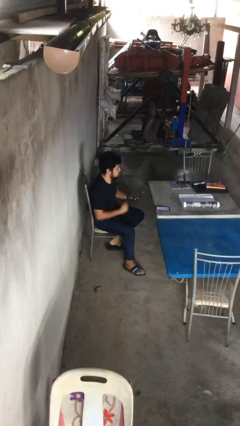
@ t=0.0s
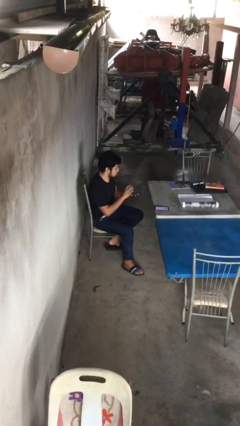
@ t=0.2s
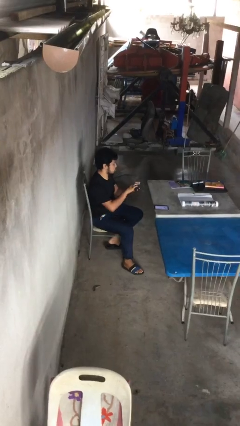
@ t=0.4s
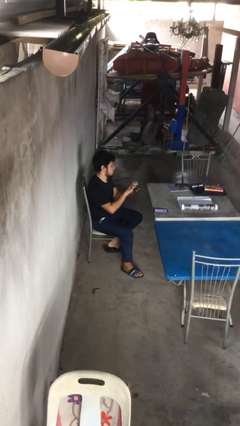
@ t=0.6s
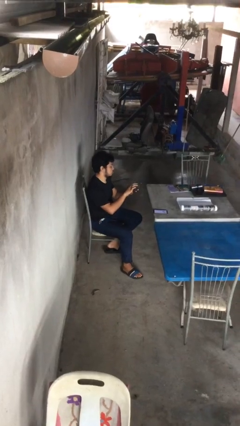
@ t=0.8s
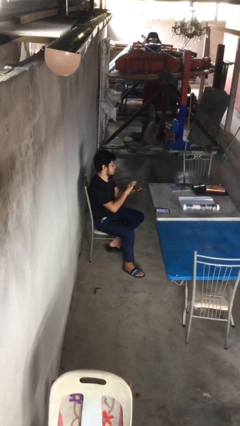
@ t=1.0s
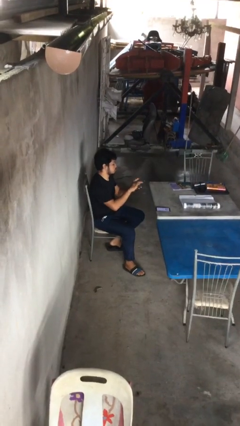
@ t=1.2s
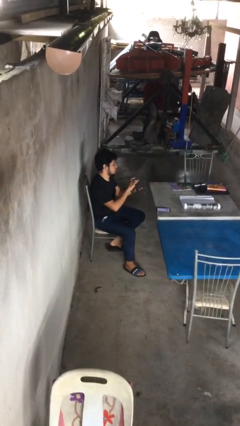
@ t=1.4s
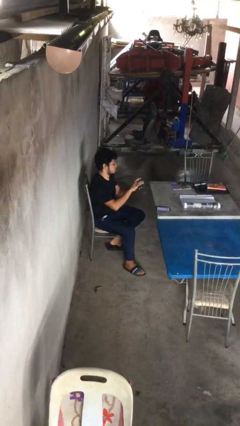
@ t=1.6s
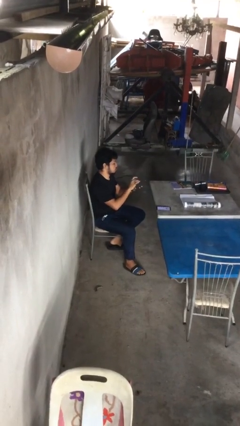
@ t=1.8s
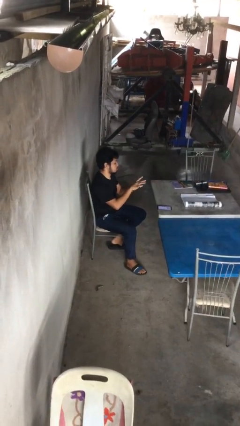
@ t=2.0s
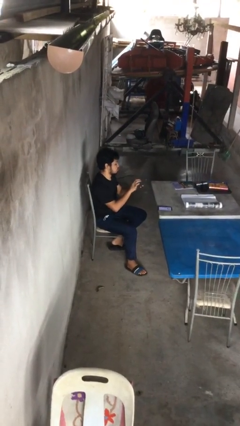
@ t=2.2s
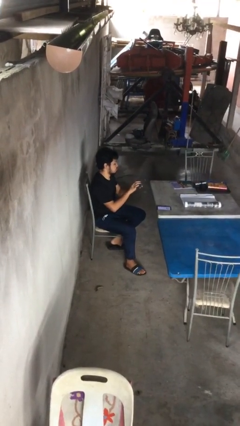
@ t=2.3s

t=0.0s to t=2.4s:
person interacts with tablet

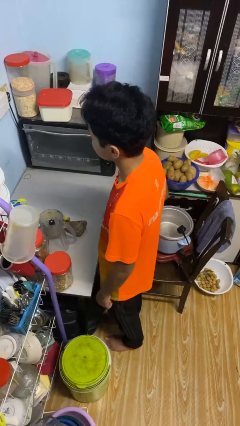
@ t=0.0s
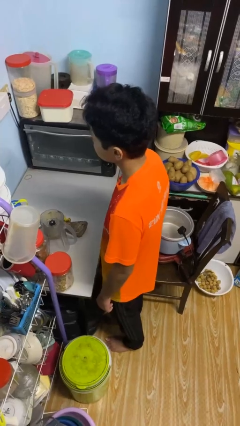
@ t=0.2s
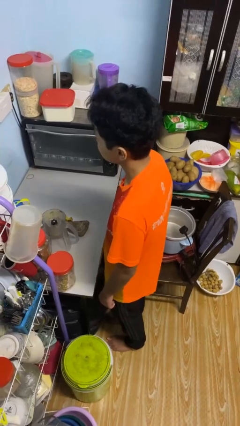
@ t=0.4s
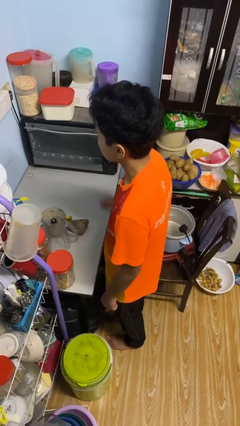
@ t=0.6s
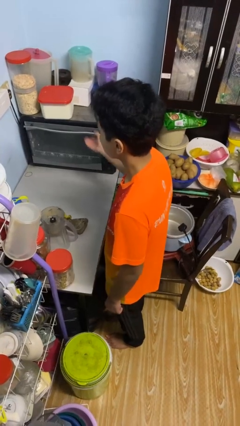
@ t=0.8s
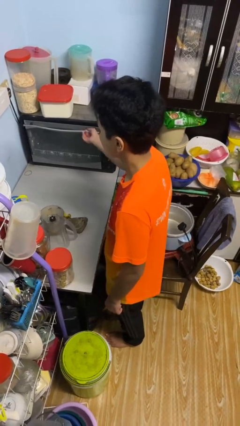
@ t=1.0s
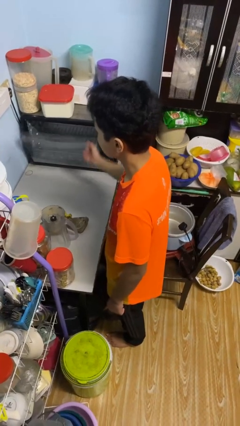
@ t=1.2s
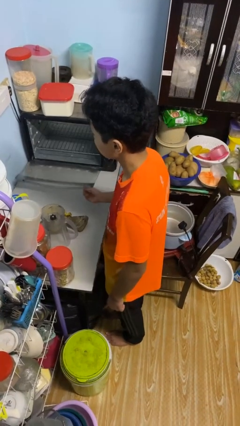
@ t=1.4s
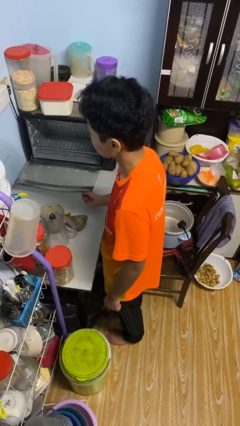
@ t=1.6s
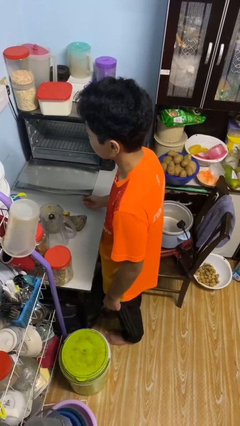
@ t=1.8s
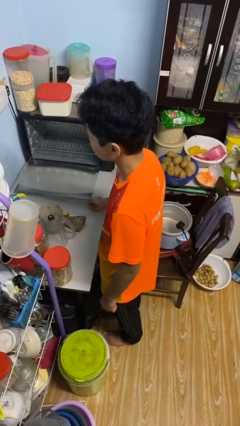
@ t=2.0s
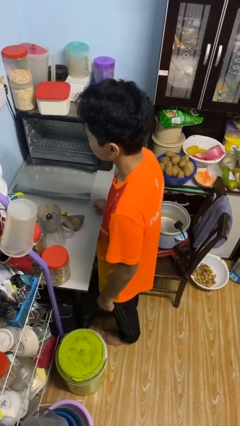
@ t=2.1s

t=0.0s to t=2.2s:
person opens oven door

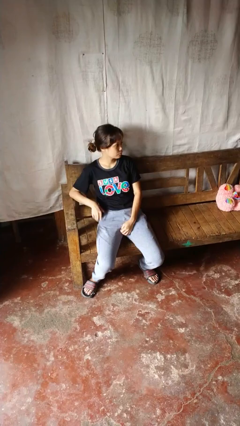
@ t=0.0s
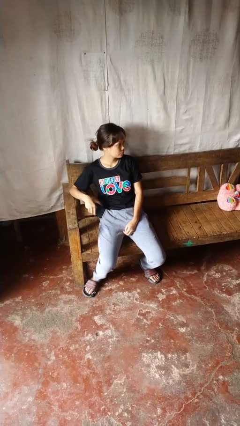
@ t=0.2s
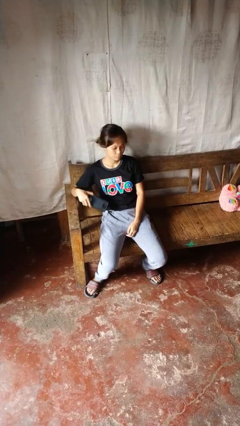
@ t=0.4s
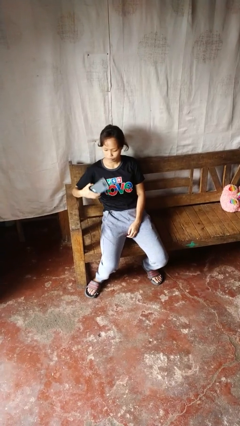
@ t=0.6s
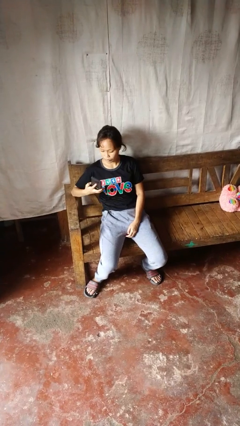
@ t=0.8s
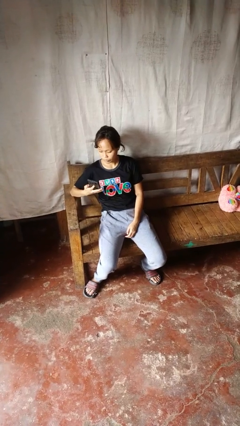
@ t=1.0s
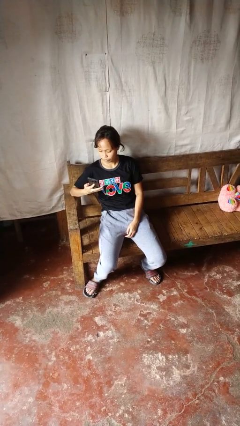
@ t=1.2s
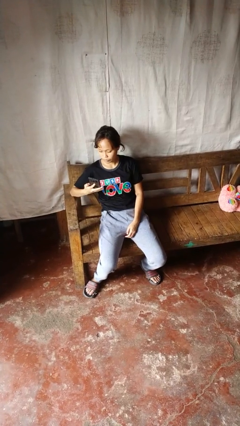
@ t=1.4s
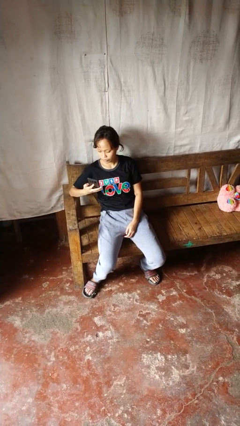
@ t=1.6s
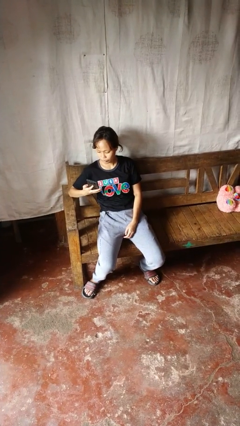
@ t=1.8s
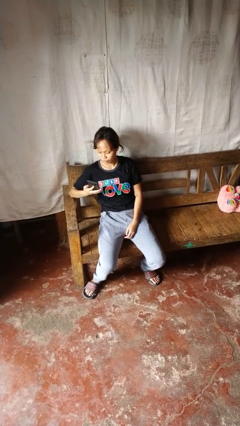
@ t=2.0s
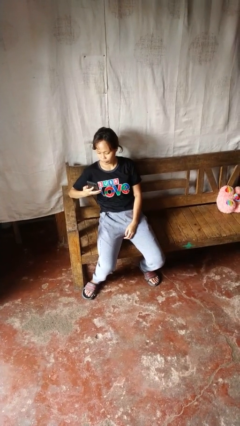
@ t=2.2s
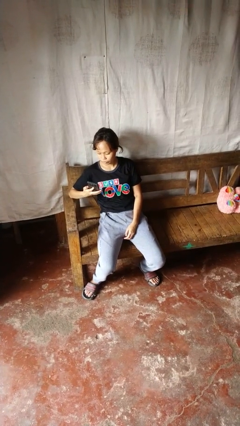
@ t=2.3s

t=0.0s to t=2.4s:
person takes phone from pocket

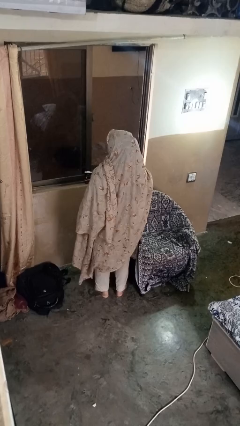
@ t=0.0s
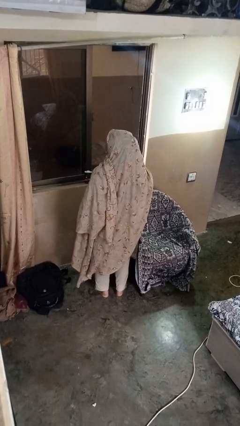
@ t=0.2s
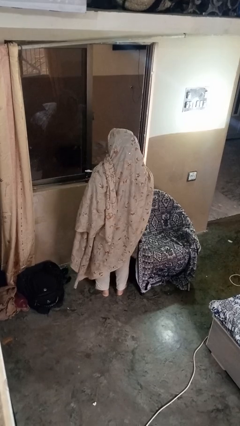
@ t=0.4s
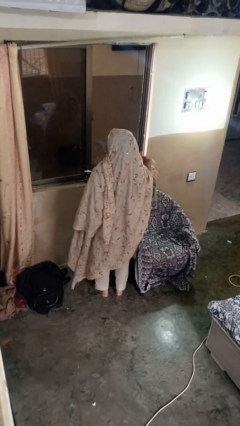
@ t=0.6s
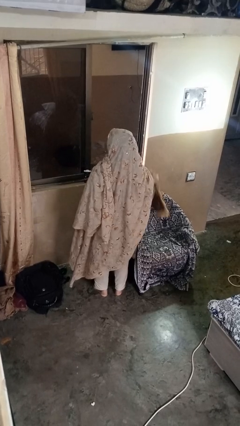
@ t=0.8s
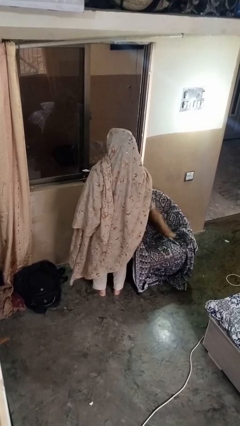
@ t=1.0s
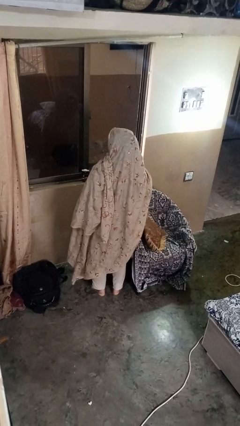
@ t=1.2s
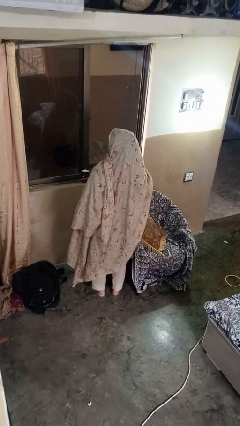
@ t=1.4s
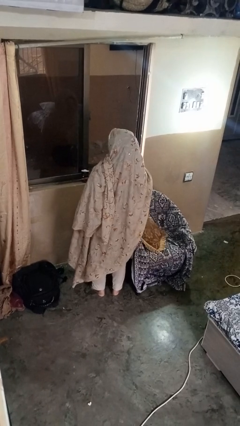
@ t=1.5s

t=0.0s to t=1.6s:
person puts down object on couch

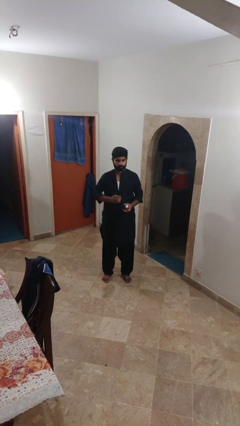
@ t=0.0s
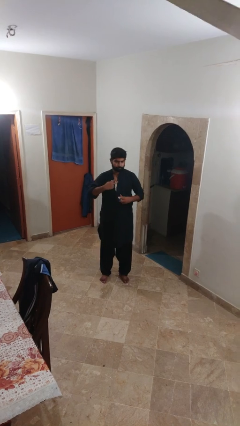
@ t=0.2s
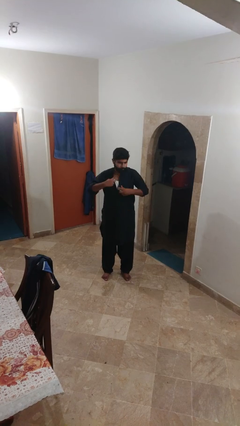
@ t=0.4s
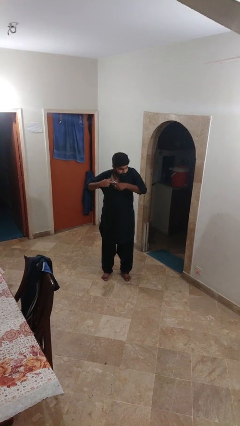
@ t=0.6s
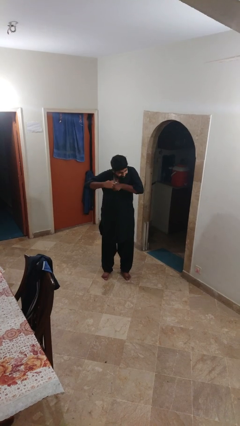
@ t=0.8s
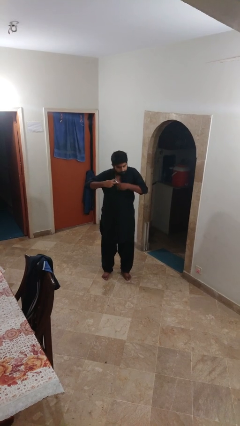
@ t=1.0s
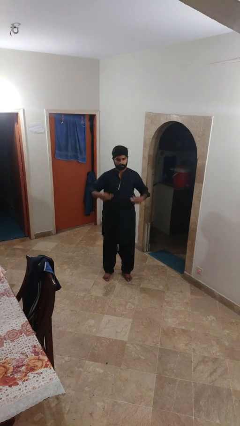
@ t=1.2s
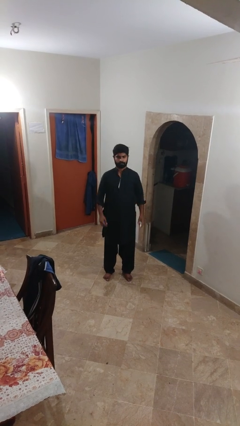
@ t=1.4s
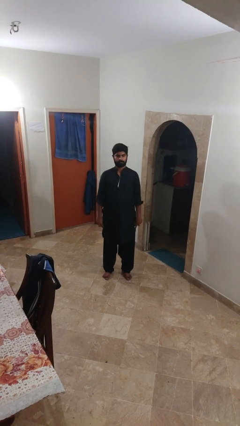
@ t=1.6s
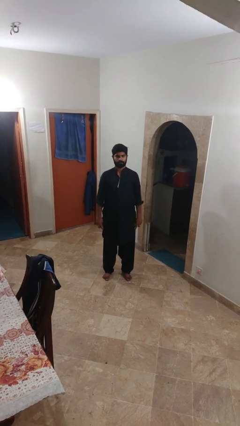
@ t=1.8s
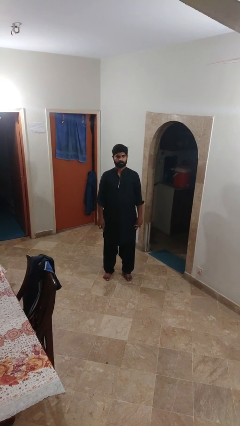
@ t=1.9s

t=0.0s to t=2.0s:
person applies deodorant

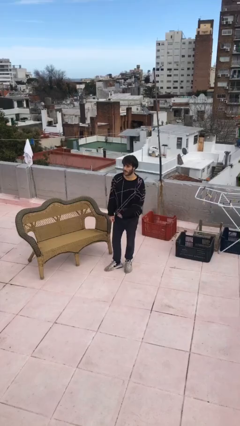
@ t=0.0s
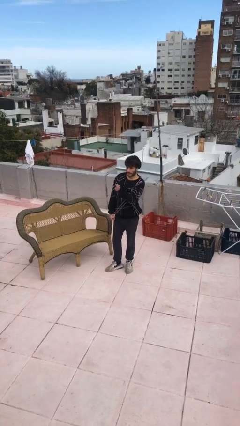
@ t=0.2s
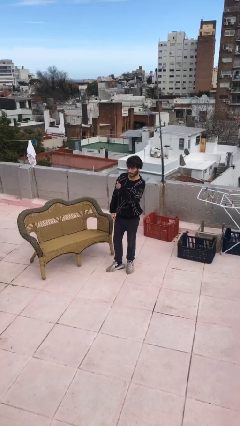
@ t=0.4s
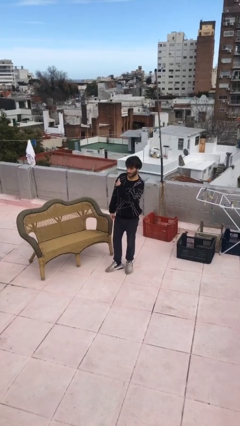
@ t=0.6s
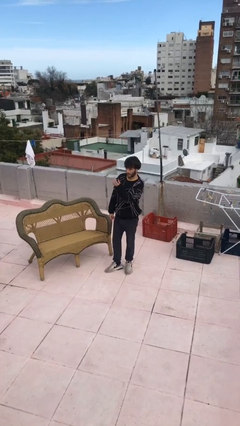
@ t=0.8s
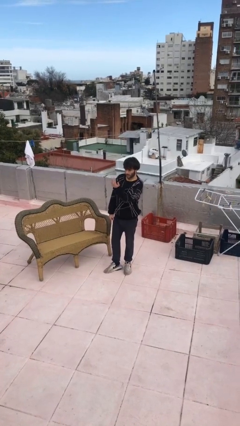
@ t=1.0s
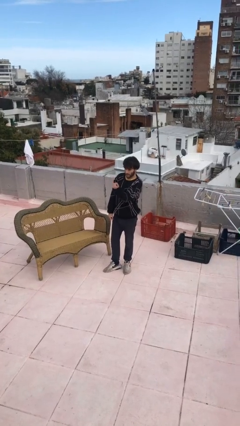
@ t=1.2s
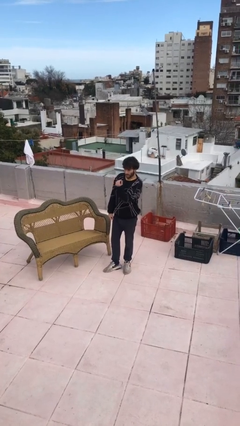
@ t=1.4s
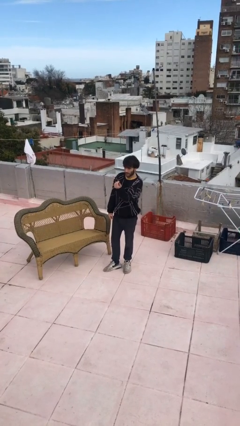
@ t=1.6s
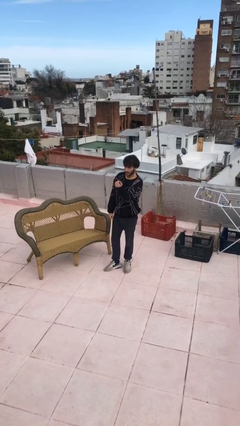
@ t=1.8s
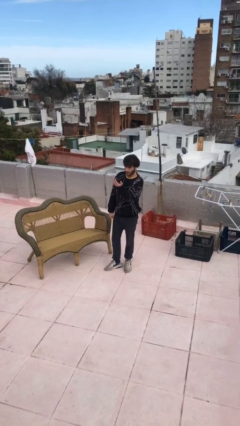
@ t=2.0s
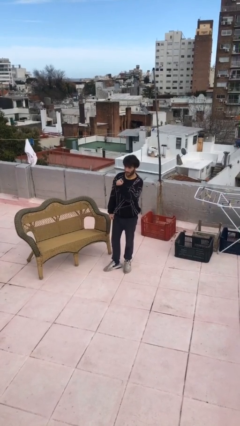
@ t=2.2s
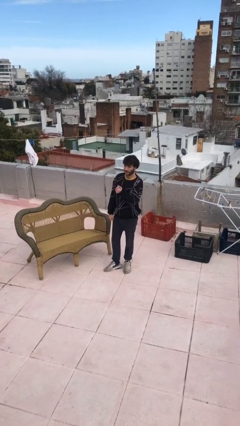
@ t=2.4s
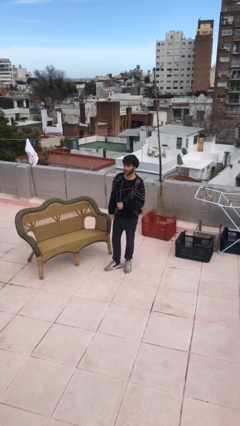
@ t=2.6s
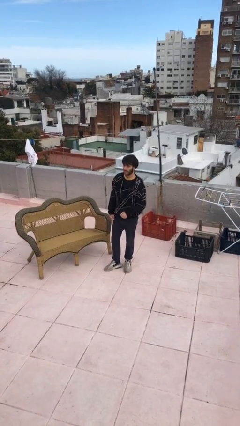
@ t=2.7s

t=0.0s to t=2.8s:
person gestures come here

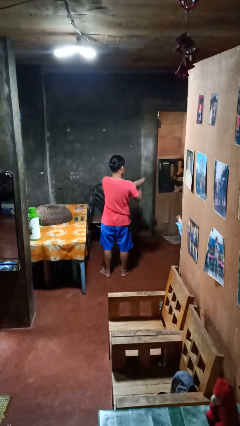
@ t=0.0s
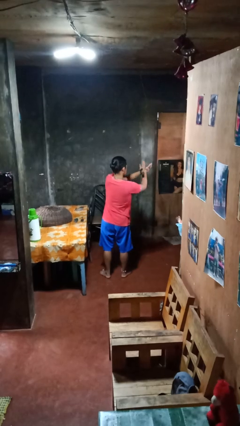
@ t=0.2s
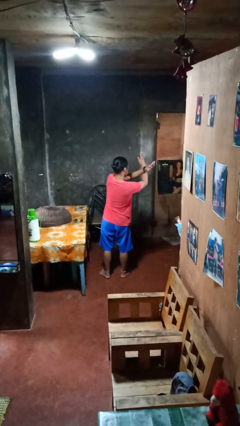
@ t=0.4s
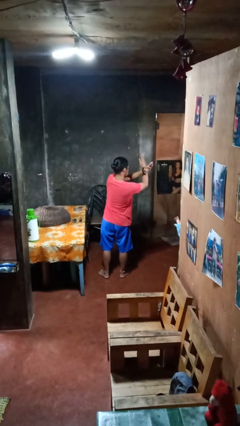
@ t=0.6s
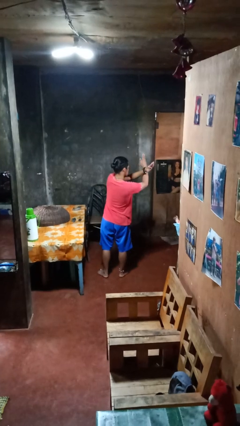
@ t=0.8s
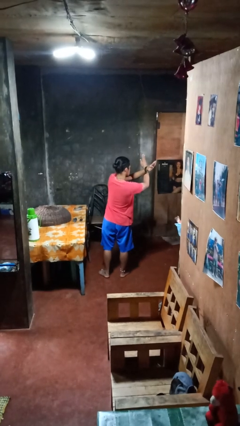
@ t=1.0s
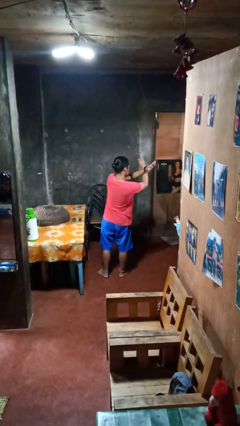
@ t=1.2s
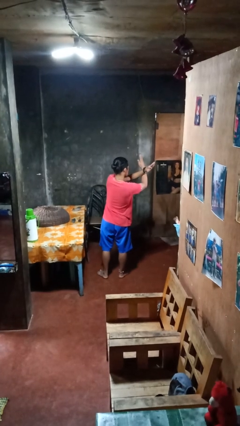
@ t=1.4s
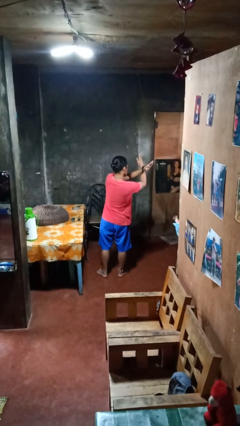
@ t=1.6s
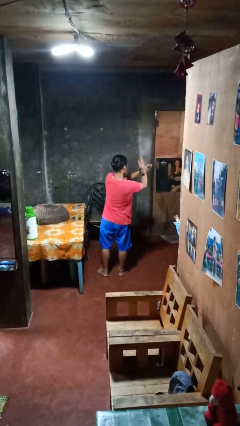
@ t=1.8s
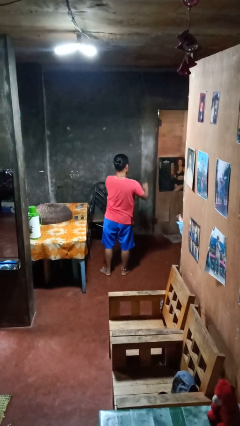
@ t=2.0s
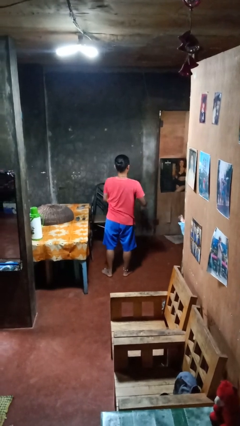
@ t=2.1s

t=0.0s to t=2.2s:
person gestures arms x

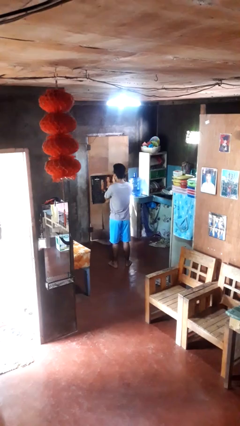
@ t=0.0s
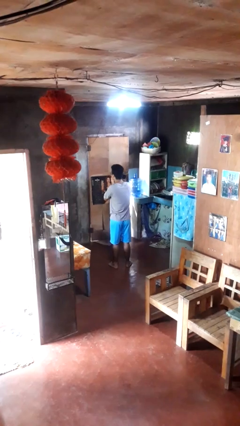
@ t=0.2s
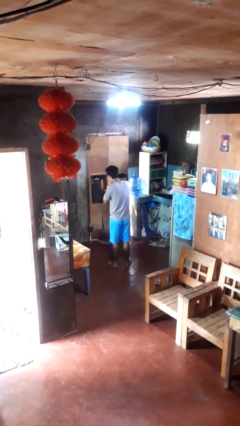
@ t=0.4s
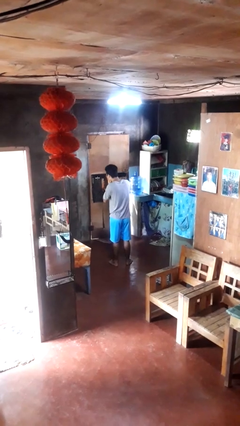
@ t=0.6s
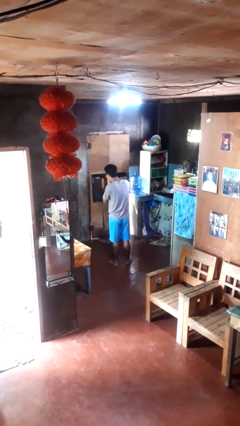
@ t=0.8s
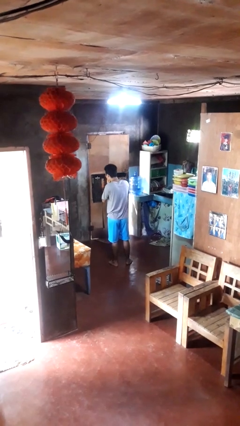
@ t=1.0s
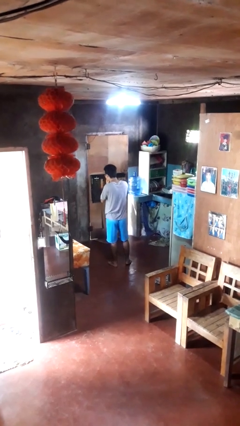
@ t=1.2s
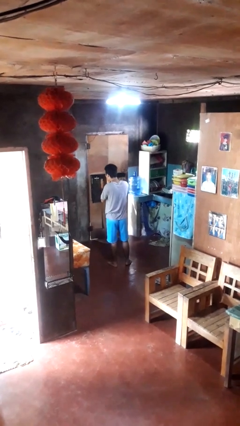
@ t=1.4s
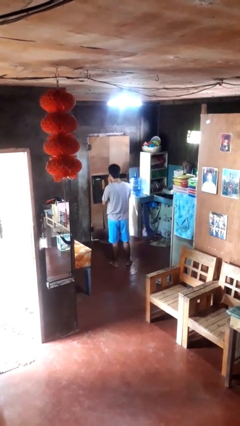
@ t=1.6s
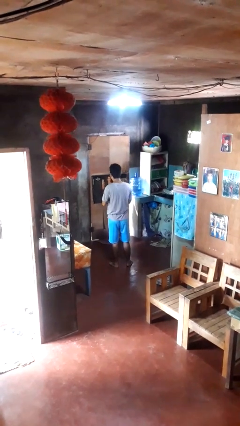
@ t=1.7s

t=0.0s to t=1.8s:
person sneezes into hand
